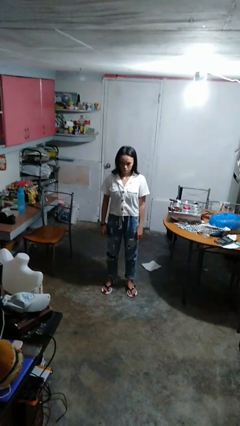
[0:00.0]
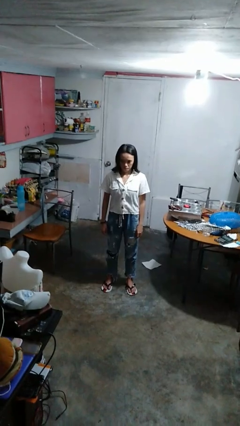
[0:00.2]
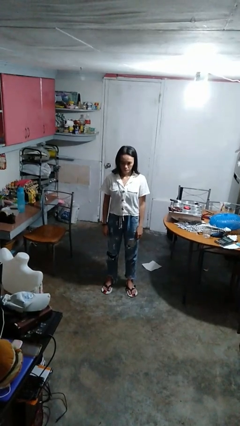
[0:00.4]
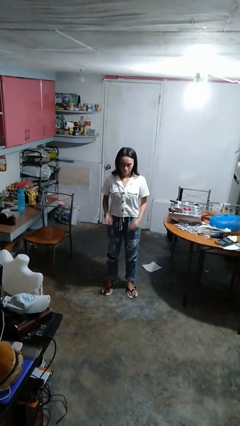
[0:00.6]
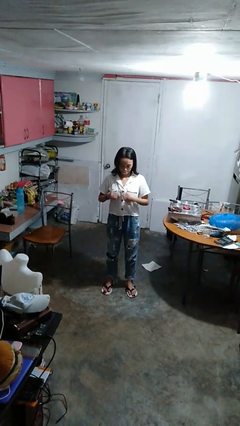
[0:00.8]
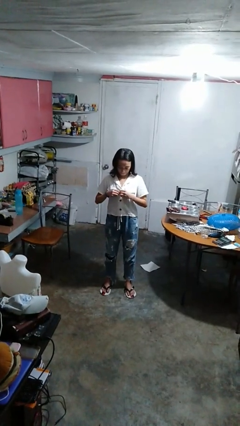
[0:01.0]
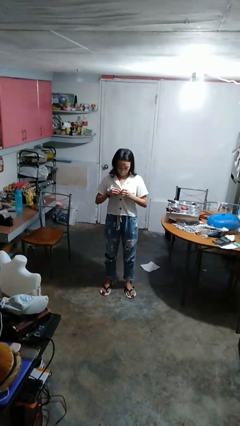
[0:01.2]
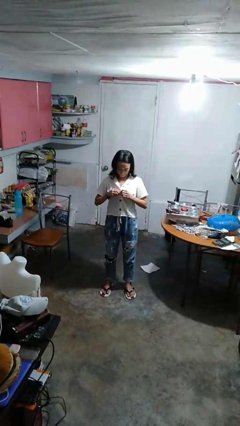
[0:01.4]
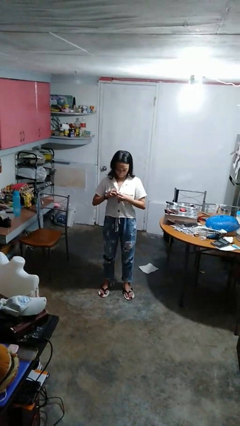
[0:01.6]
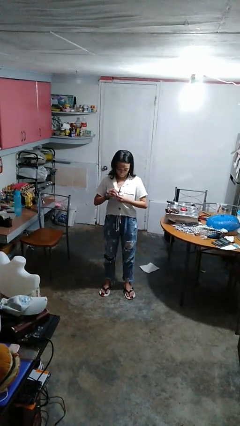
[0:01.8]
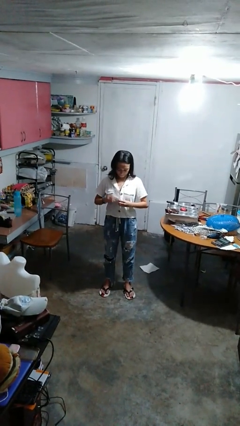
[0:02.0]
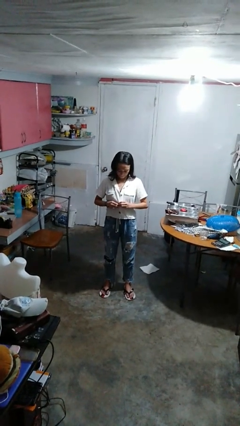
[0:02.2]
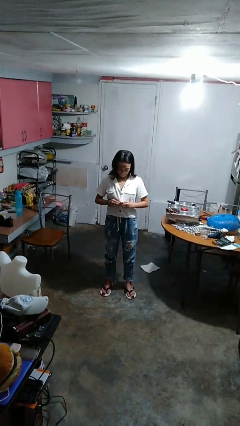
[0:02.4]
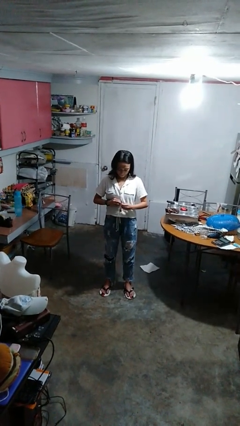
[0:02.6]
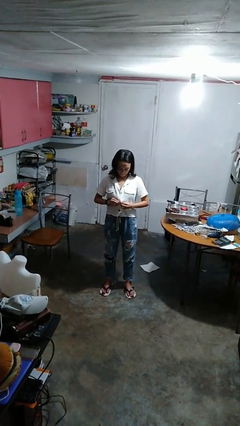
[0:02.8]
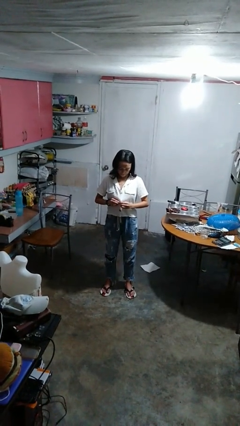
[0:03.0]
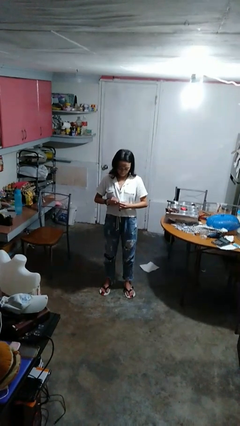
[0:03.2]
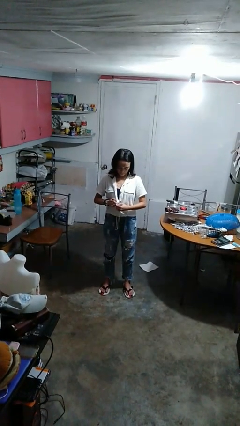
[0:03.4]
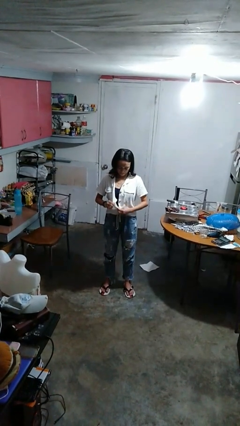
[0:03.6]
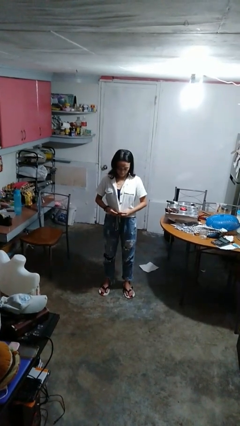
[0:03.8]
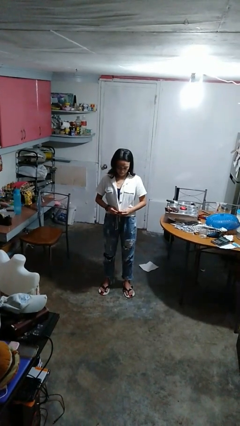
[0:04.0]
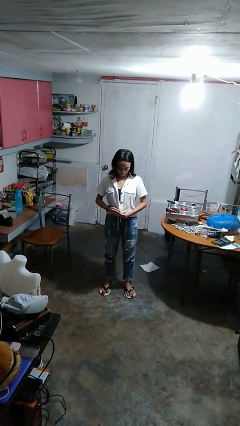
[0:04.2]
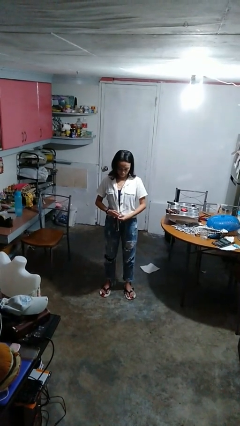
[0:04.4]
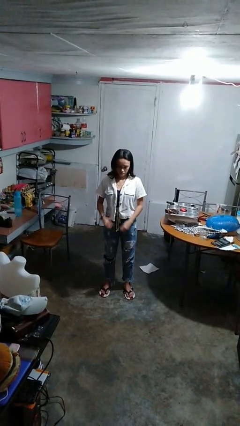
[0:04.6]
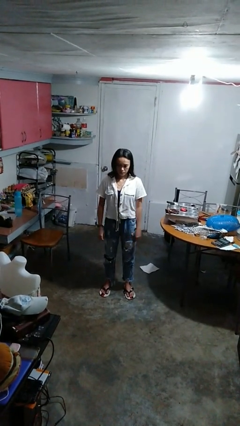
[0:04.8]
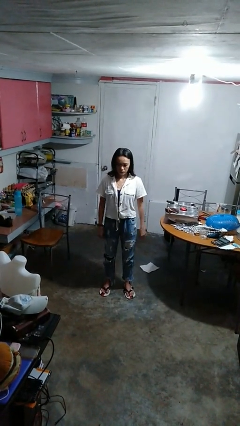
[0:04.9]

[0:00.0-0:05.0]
person unbuttons shirt

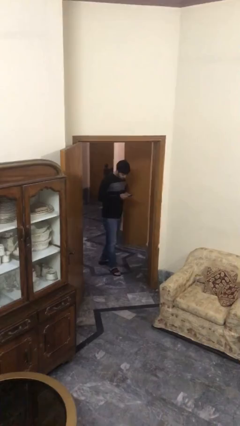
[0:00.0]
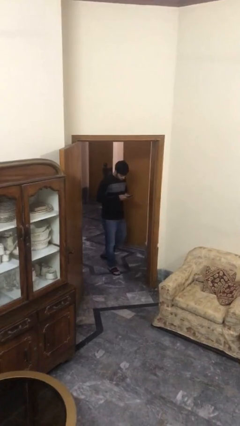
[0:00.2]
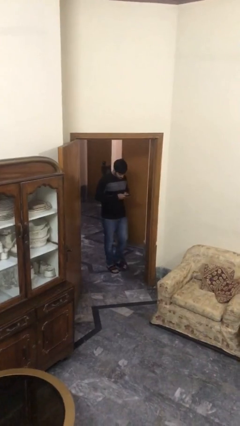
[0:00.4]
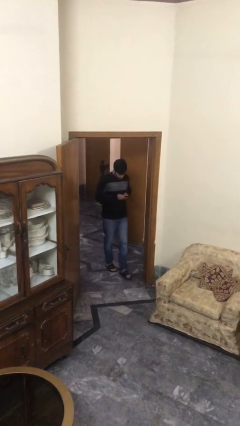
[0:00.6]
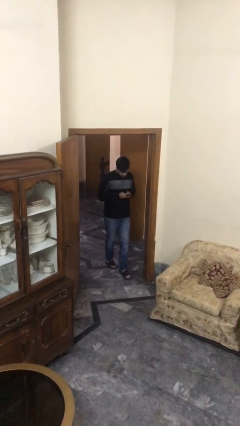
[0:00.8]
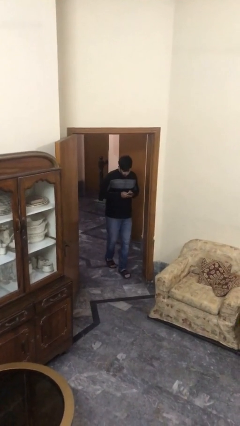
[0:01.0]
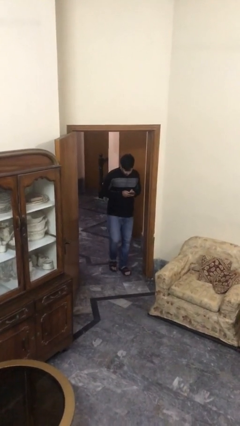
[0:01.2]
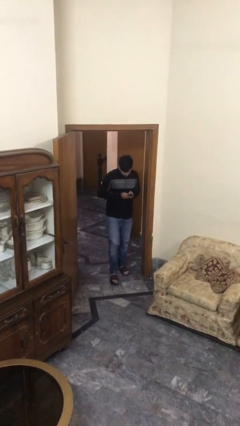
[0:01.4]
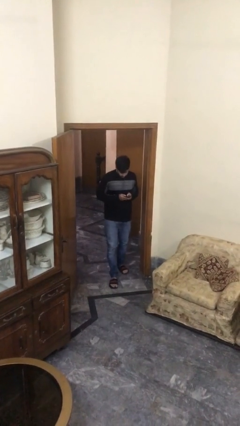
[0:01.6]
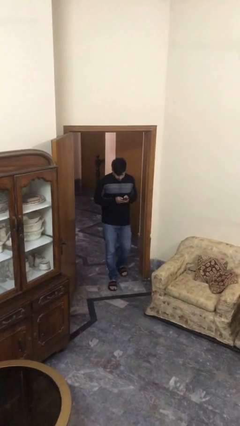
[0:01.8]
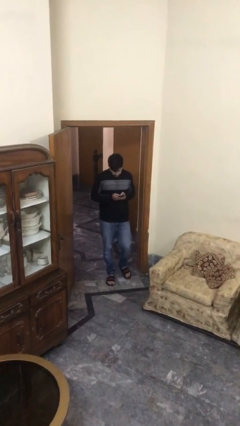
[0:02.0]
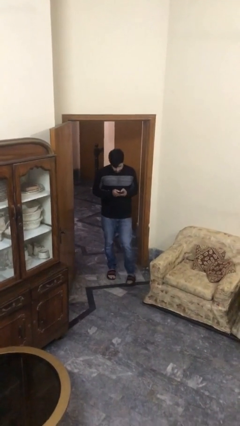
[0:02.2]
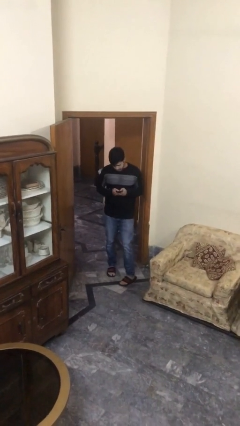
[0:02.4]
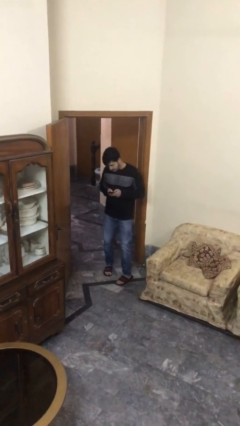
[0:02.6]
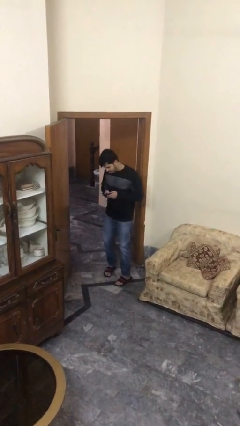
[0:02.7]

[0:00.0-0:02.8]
person enters scene through structure

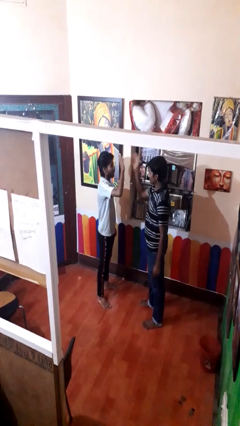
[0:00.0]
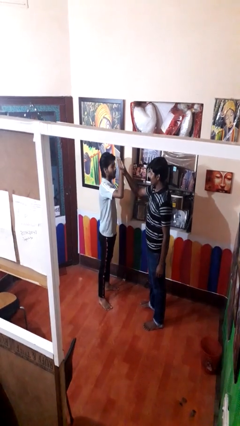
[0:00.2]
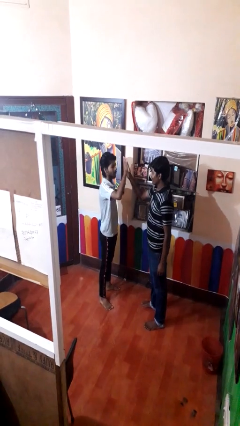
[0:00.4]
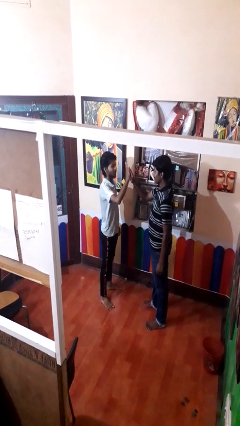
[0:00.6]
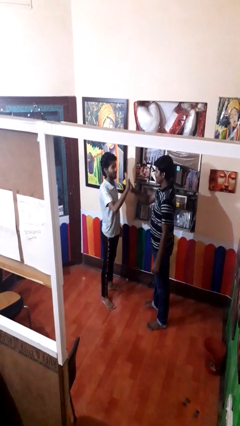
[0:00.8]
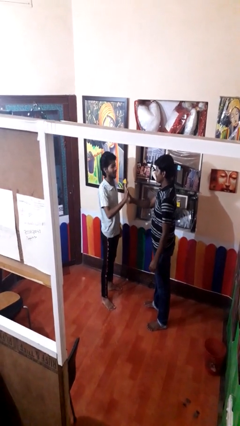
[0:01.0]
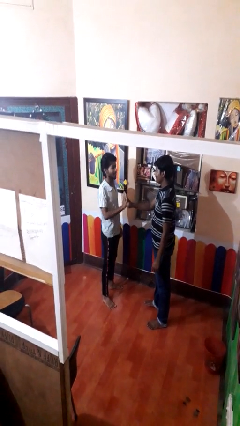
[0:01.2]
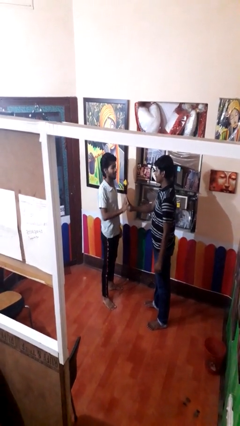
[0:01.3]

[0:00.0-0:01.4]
person highfives hand

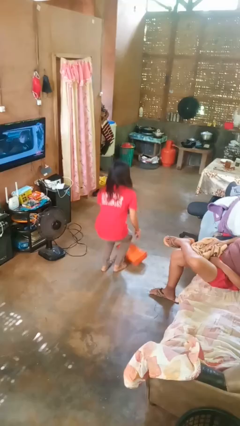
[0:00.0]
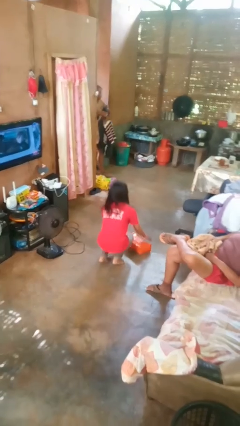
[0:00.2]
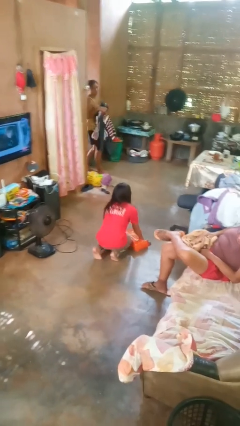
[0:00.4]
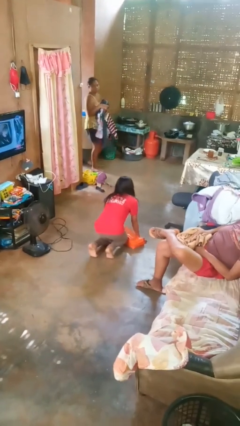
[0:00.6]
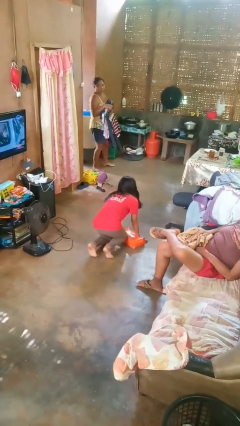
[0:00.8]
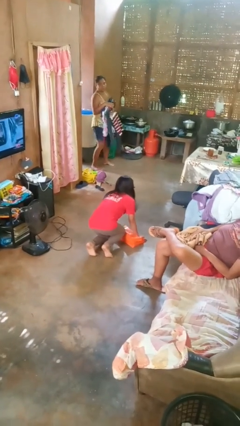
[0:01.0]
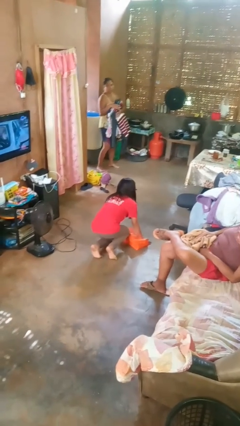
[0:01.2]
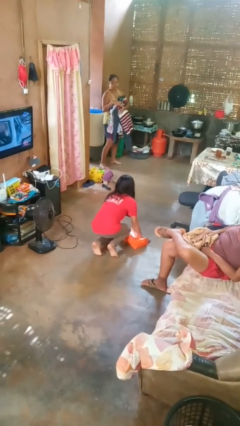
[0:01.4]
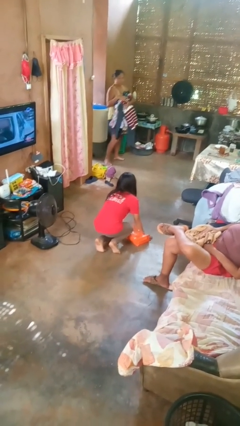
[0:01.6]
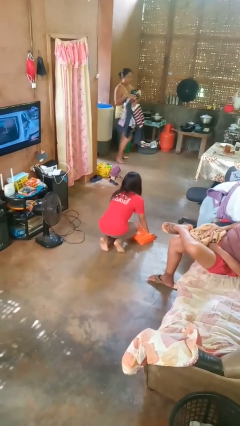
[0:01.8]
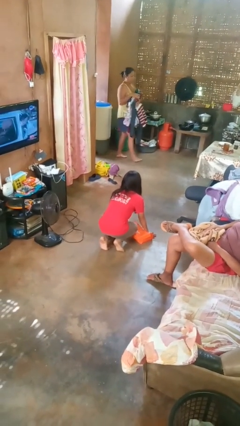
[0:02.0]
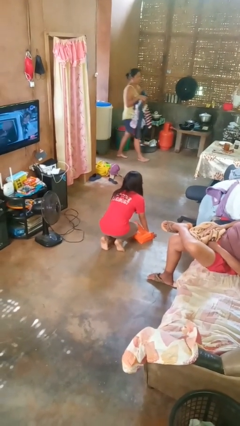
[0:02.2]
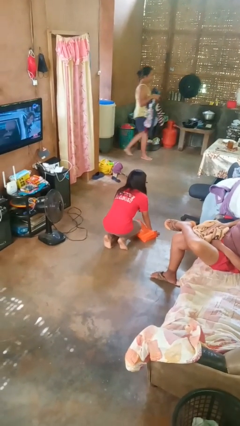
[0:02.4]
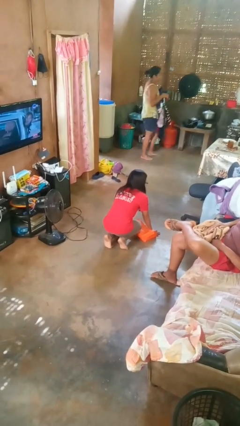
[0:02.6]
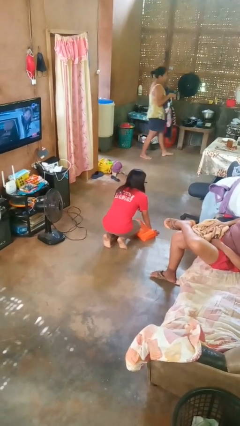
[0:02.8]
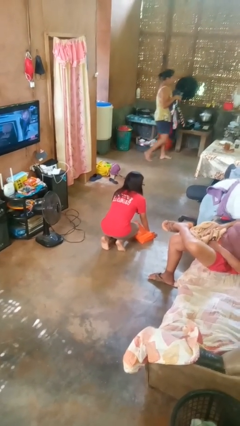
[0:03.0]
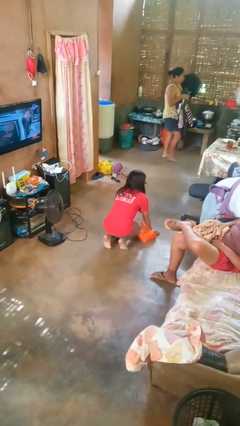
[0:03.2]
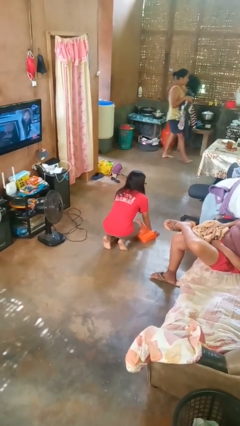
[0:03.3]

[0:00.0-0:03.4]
person trips on object on floor

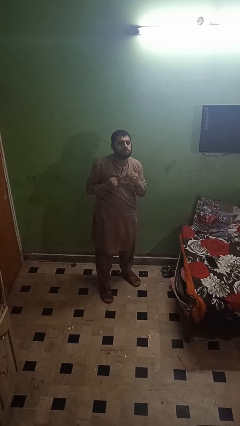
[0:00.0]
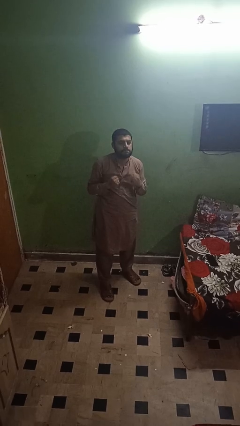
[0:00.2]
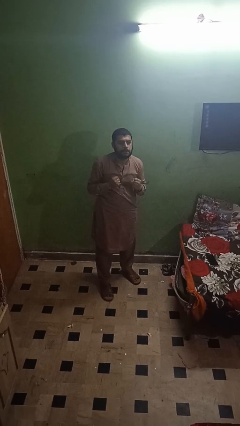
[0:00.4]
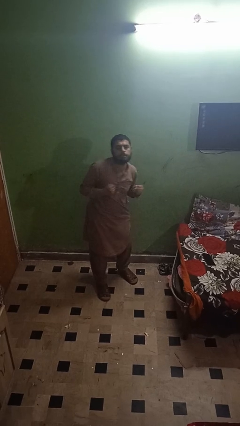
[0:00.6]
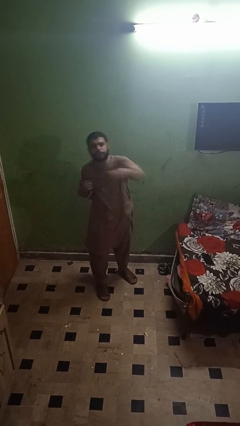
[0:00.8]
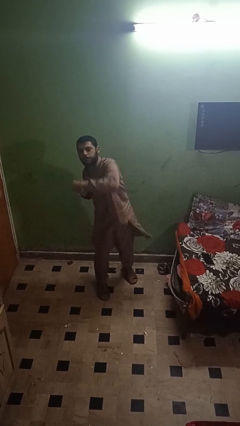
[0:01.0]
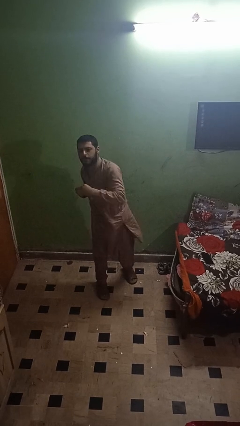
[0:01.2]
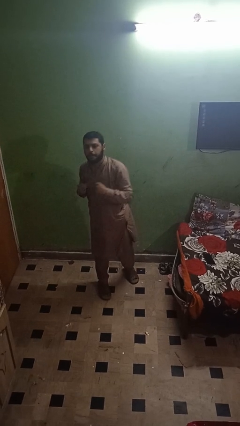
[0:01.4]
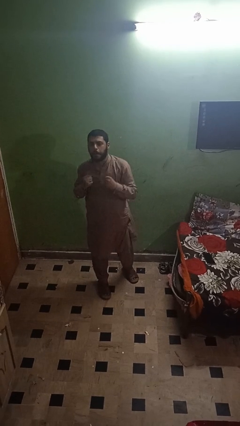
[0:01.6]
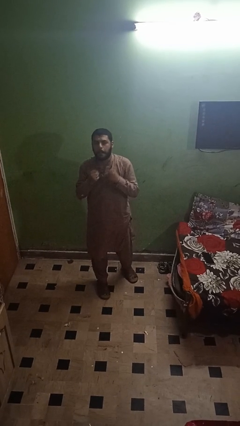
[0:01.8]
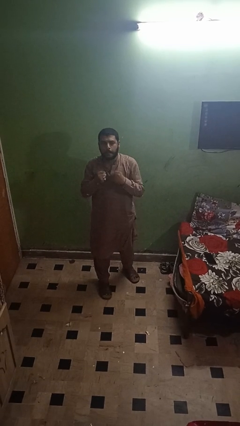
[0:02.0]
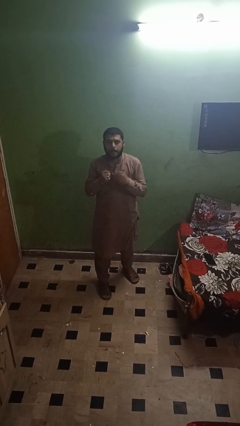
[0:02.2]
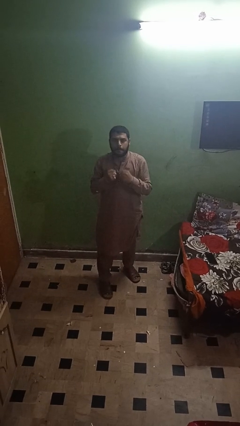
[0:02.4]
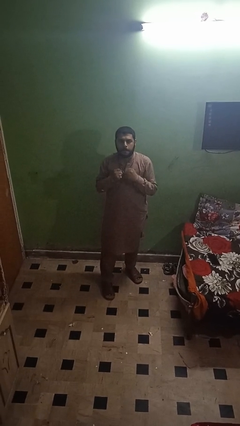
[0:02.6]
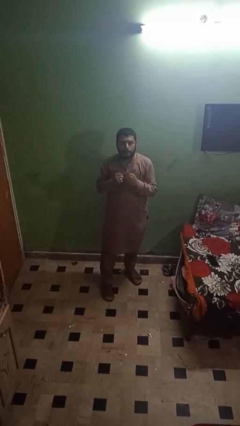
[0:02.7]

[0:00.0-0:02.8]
person punches

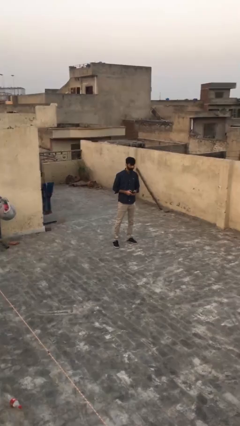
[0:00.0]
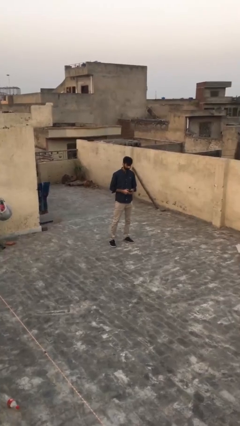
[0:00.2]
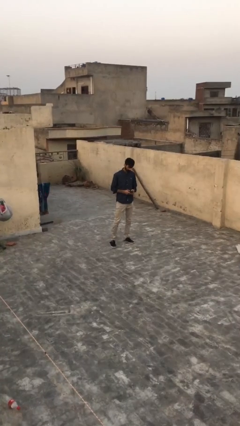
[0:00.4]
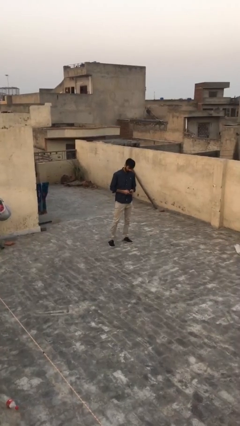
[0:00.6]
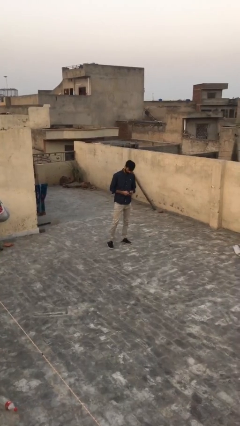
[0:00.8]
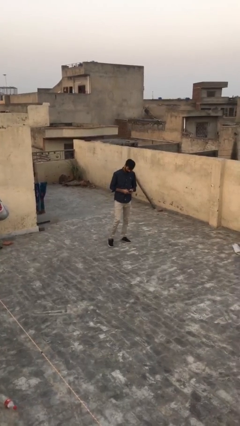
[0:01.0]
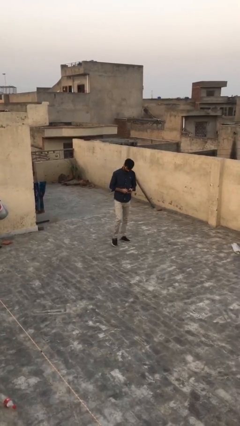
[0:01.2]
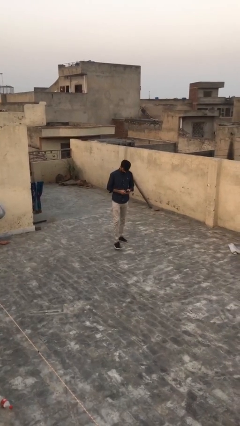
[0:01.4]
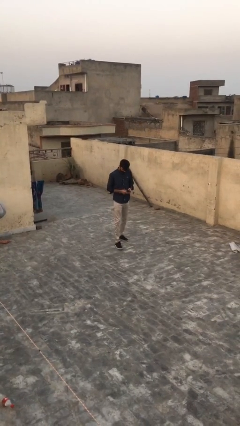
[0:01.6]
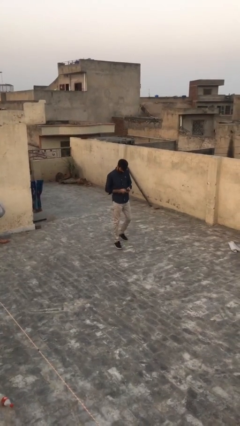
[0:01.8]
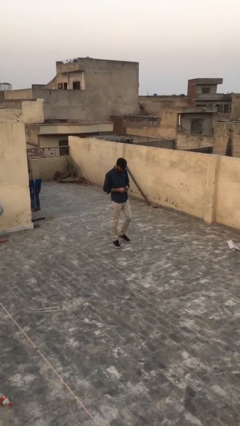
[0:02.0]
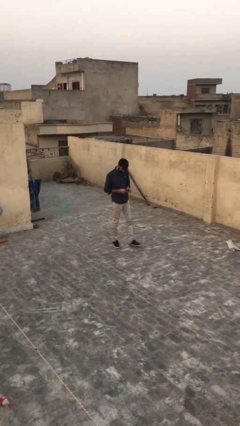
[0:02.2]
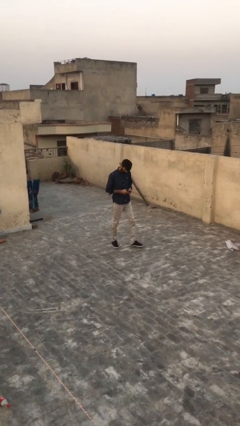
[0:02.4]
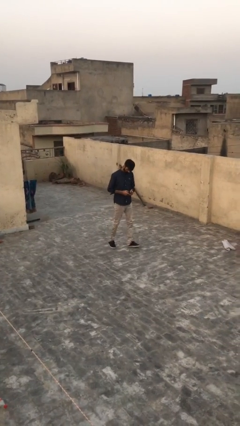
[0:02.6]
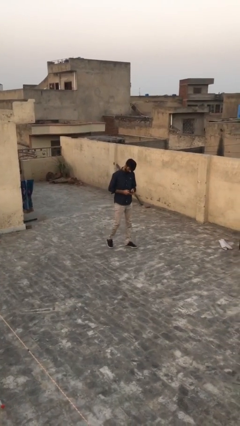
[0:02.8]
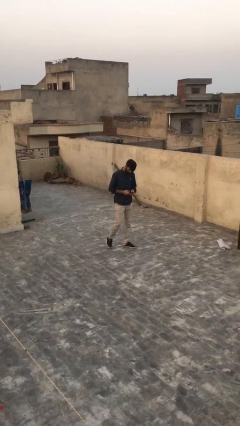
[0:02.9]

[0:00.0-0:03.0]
person texts on phone
